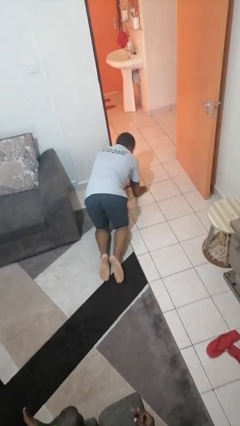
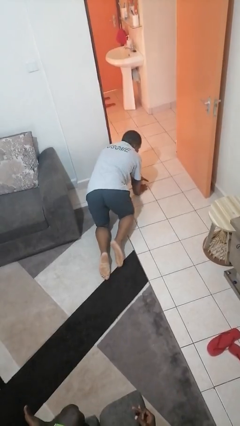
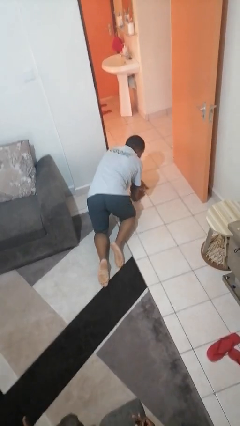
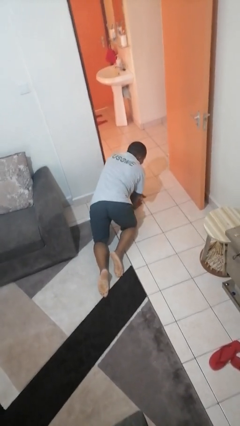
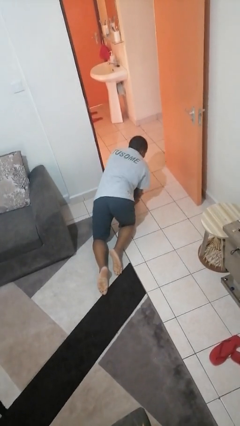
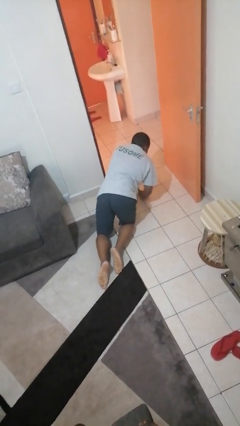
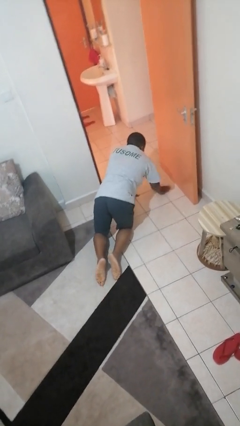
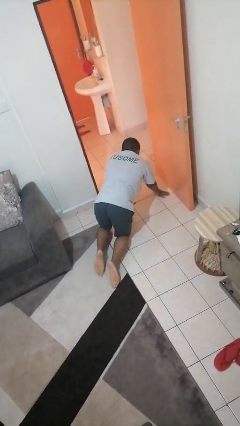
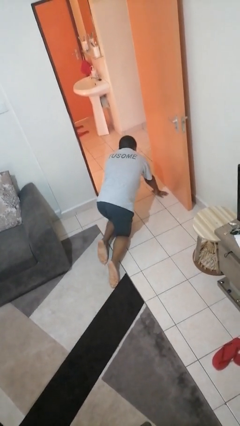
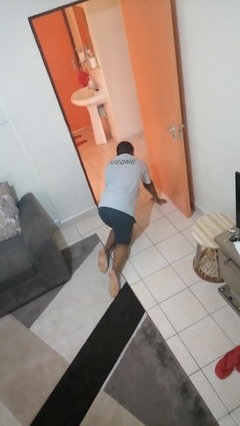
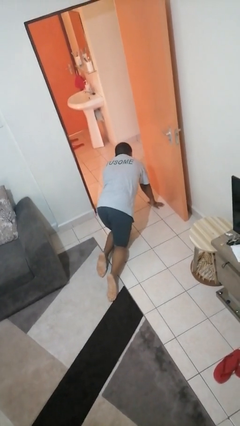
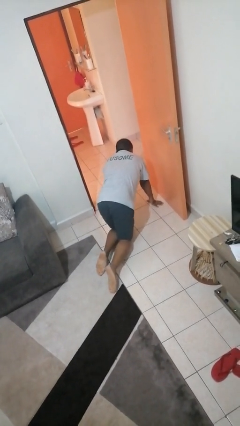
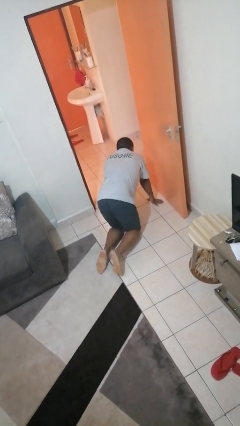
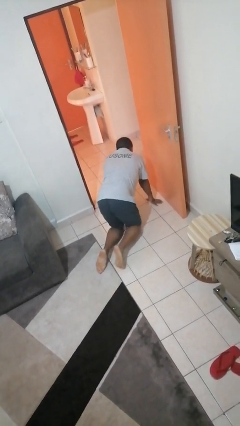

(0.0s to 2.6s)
person crawls

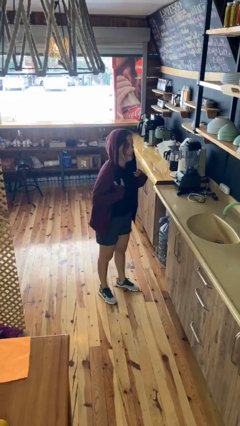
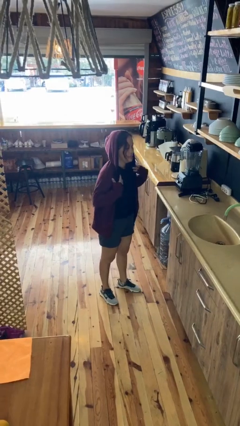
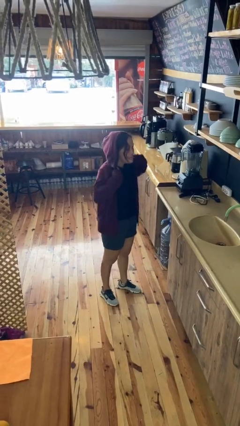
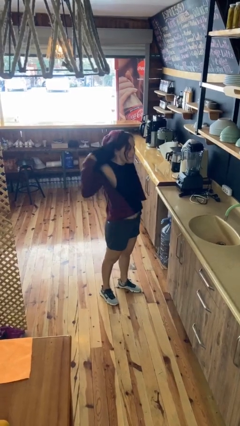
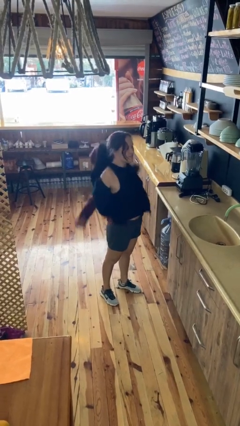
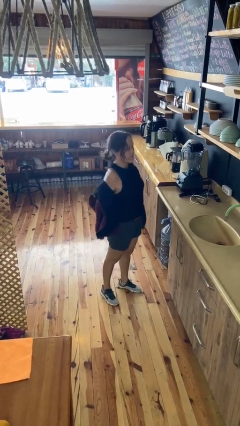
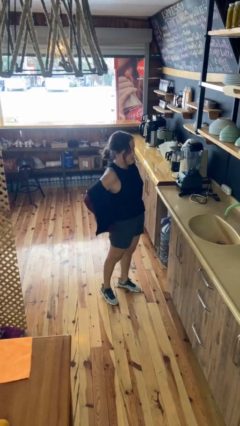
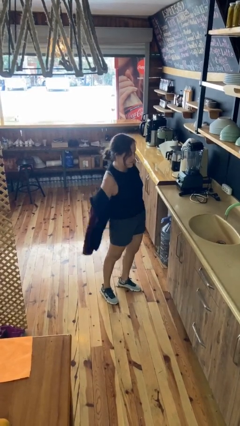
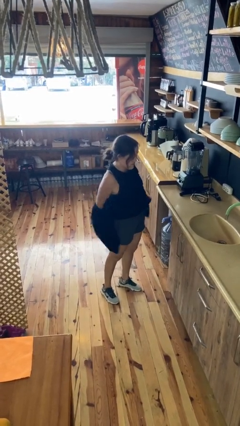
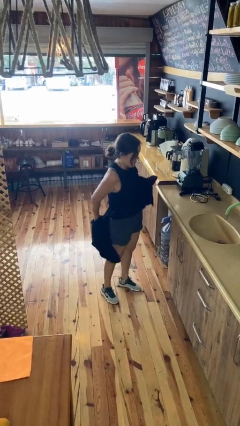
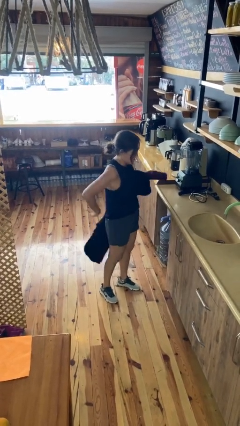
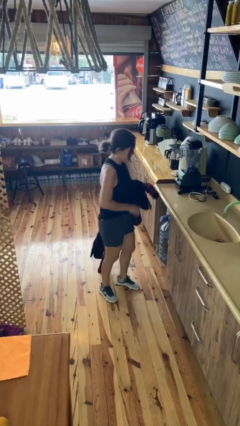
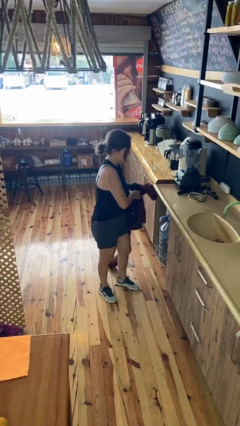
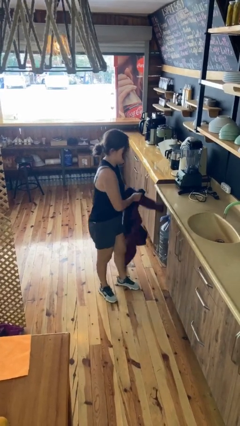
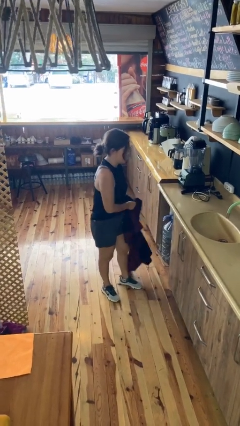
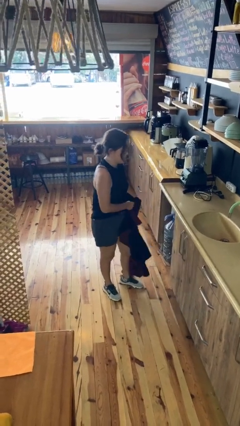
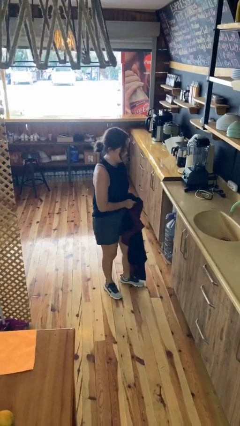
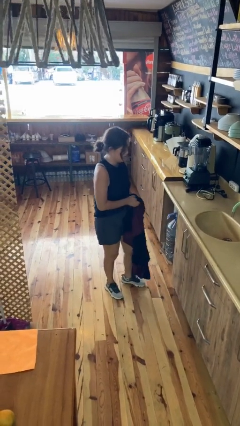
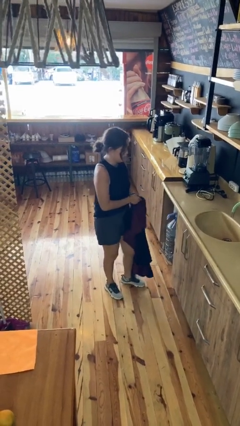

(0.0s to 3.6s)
person takes off hoodie

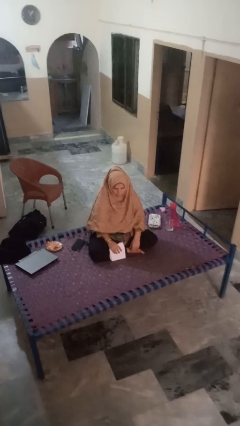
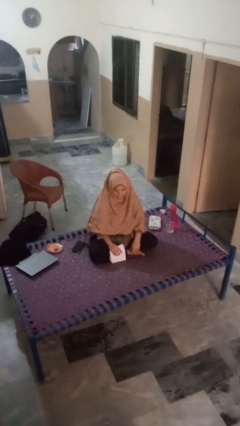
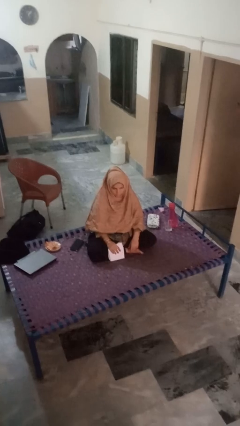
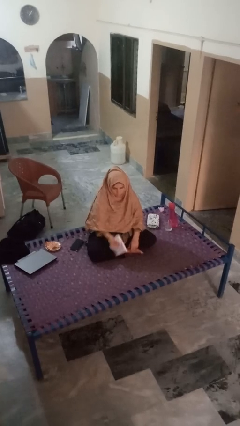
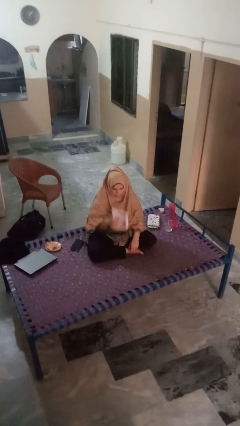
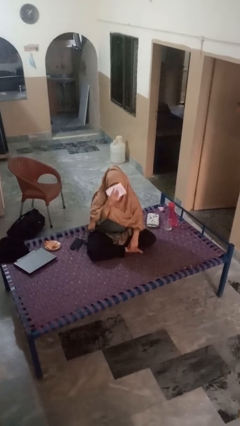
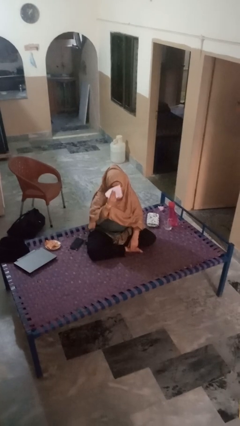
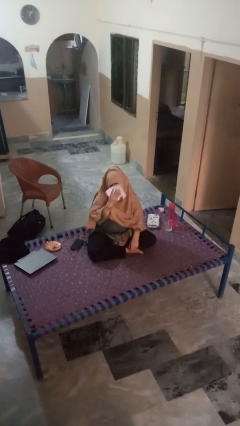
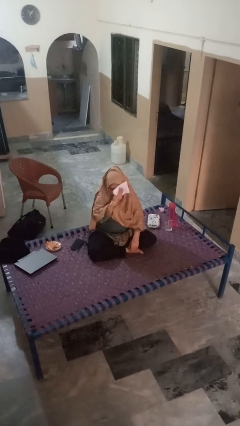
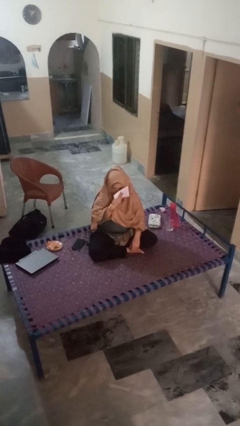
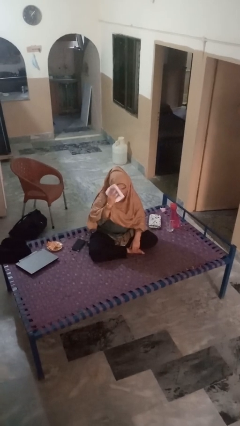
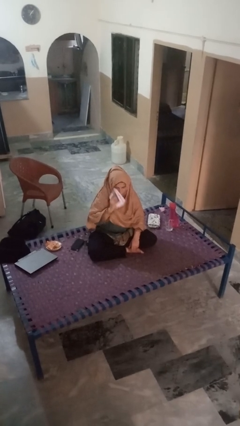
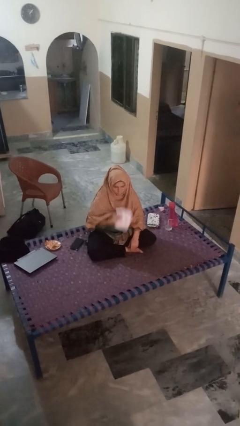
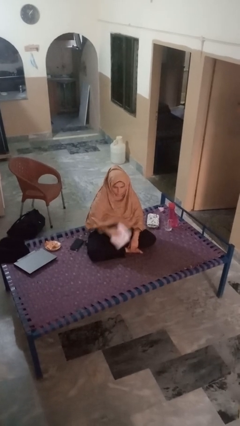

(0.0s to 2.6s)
person wipes mouth with napkin

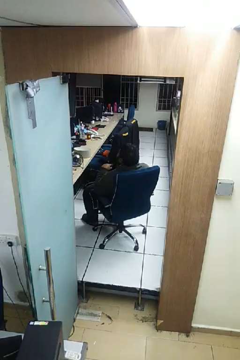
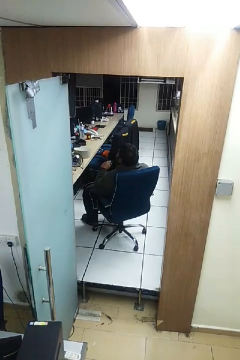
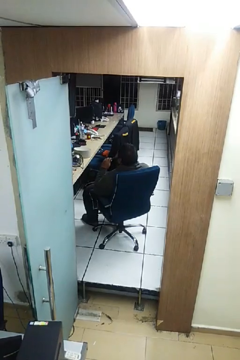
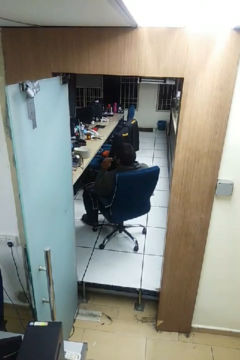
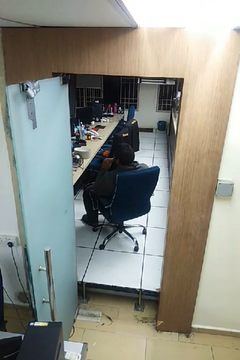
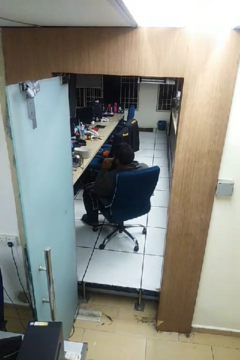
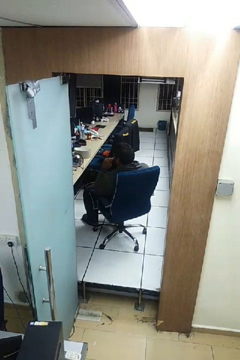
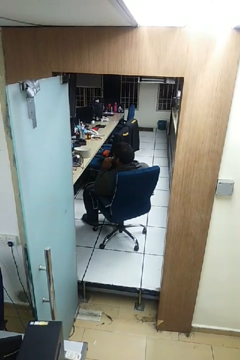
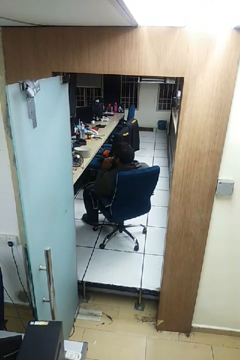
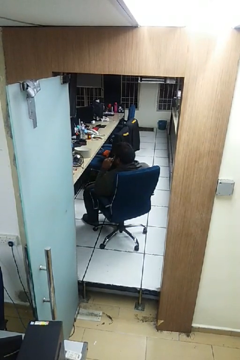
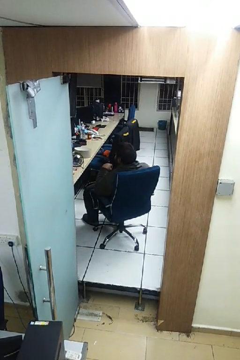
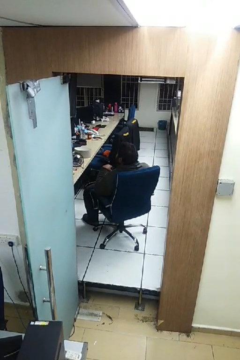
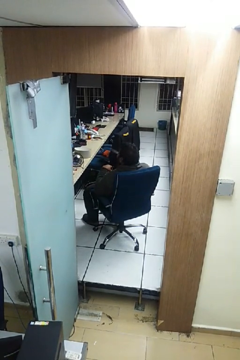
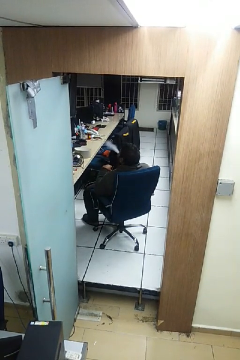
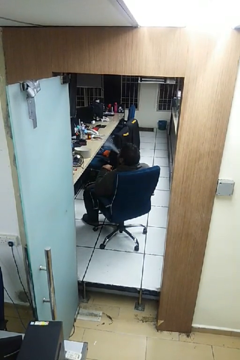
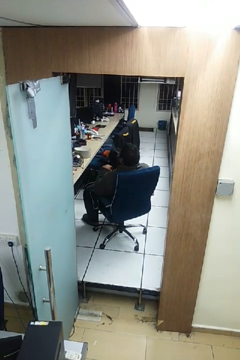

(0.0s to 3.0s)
person vapes

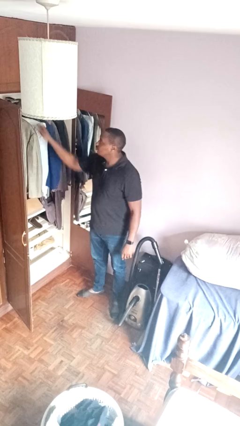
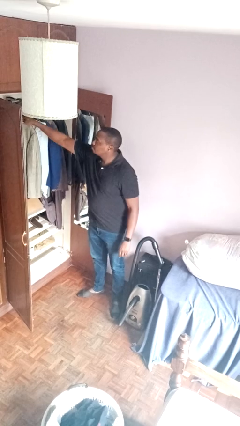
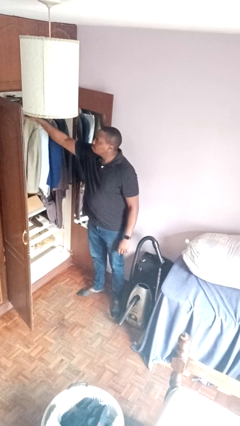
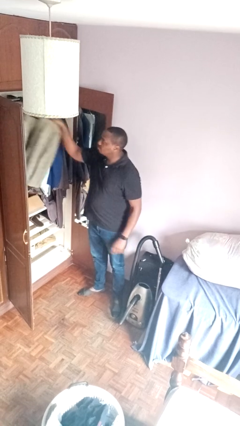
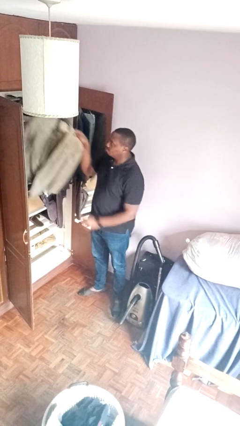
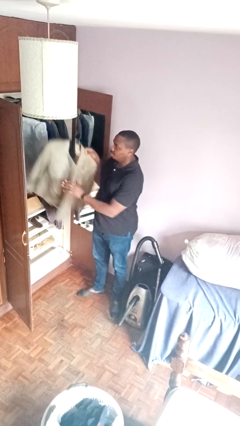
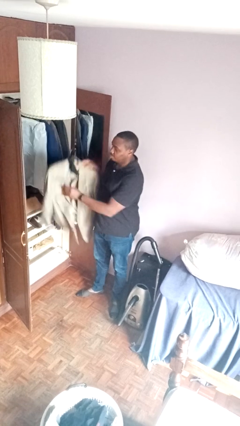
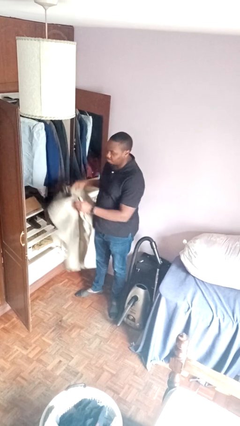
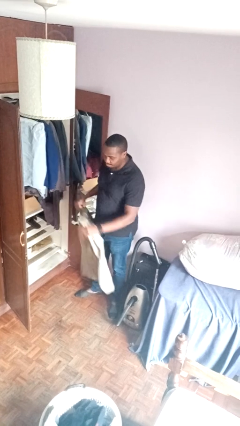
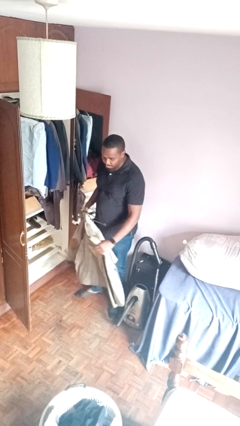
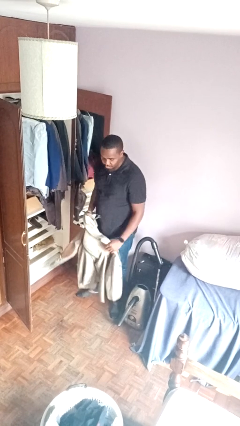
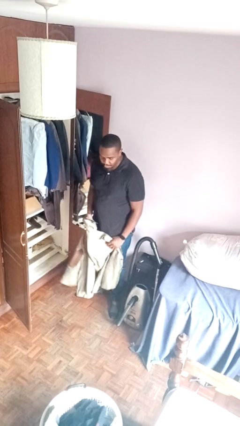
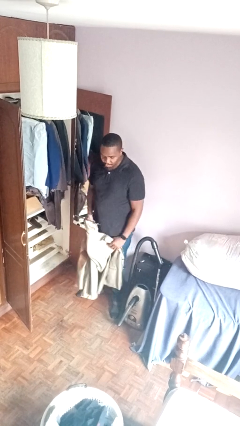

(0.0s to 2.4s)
person takes clothes from closet

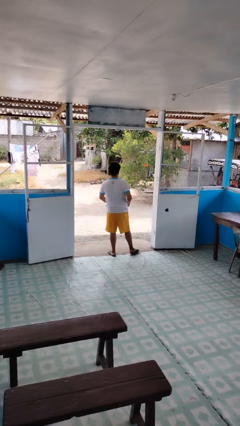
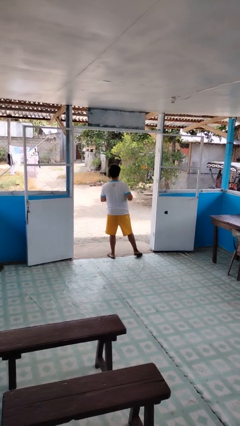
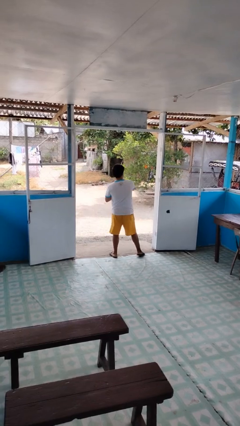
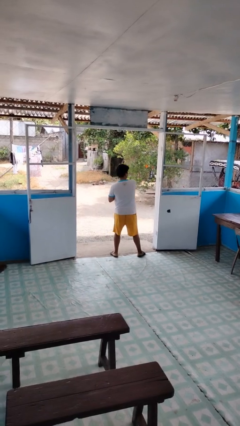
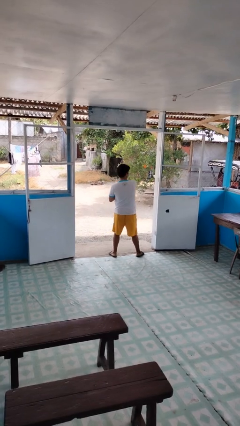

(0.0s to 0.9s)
person punches

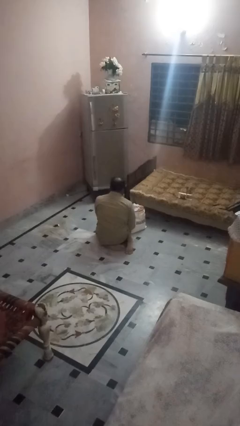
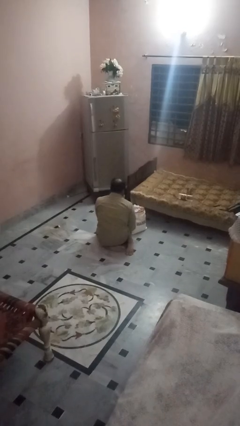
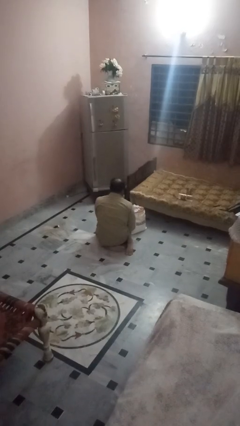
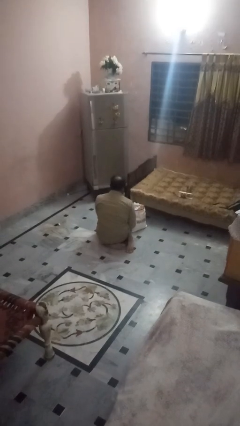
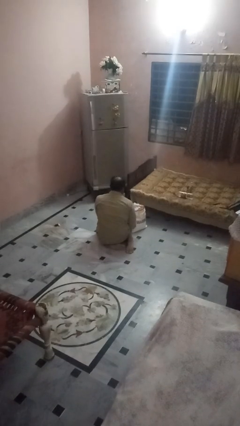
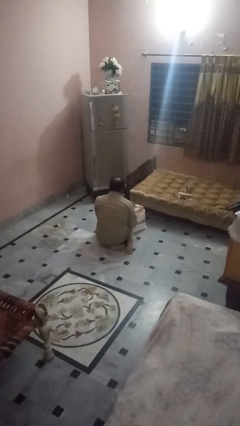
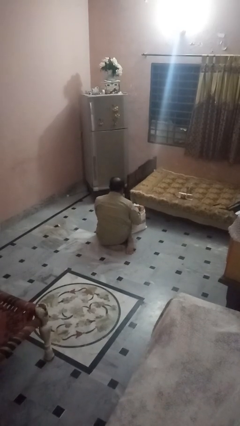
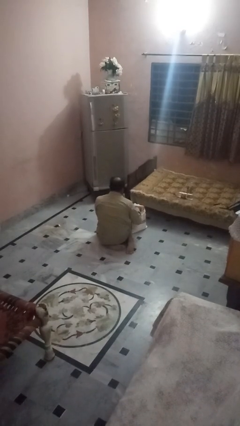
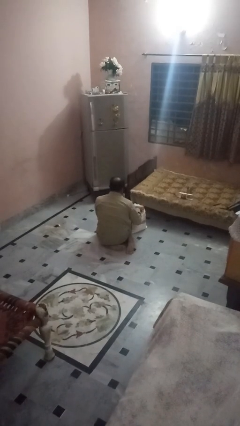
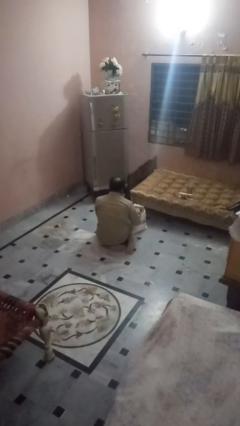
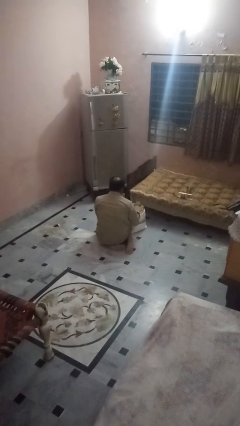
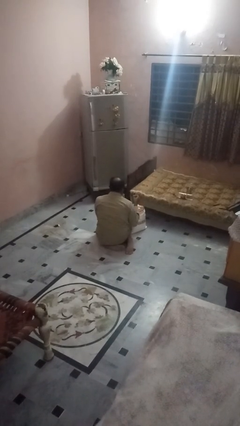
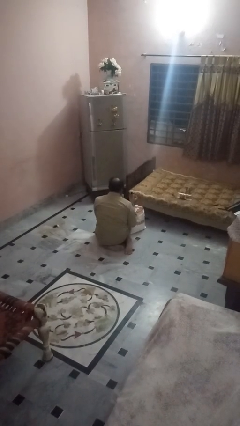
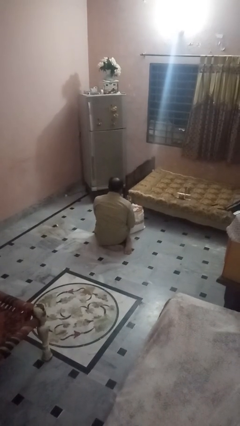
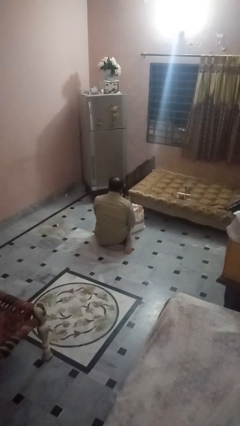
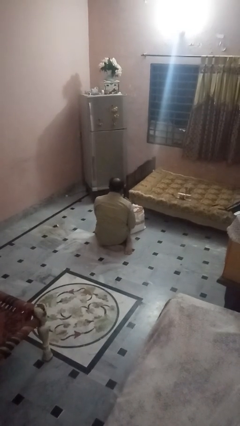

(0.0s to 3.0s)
person takes object from bag
